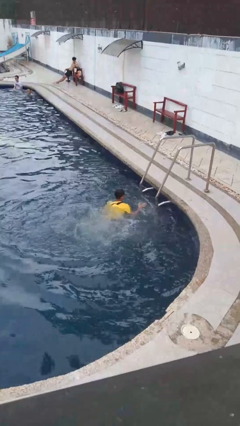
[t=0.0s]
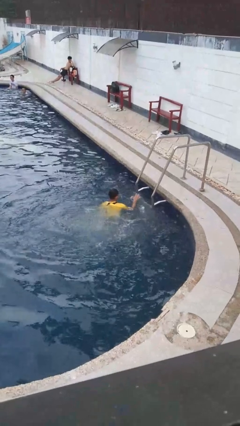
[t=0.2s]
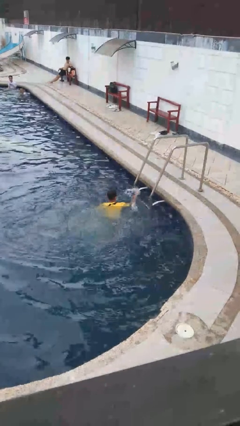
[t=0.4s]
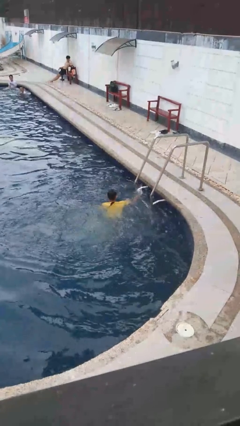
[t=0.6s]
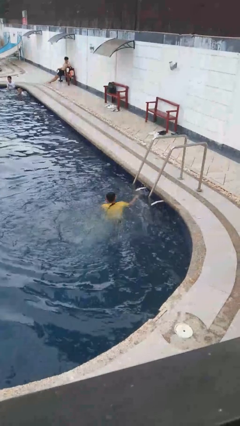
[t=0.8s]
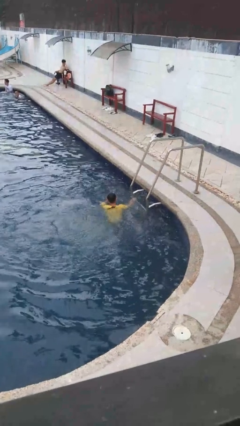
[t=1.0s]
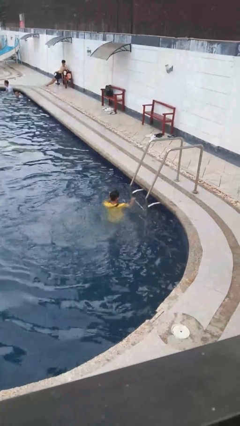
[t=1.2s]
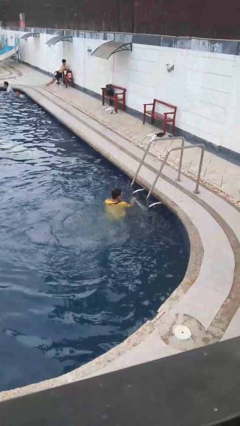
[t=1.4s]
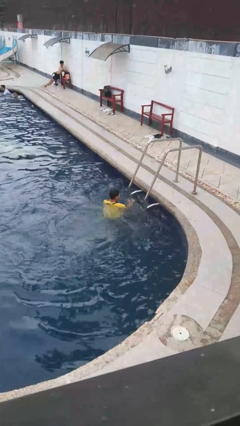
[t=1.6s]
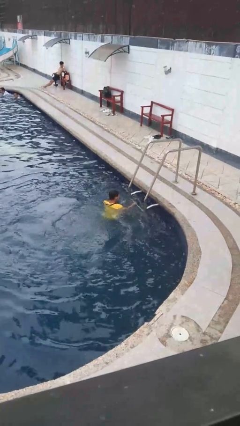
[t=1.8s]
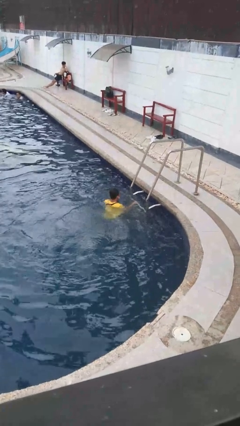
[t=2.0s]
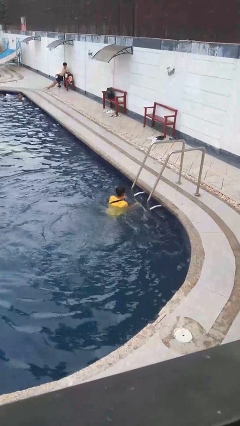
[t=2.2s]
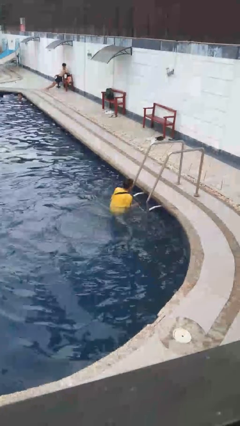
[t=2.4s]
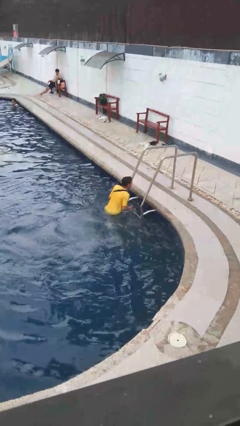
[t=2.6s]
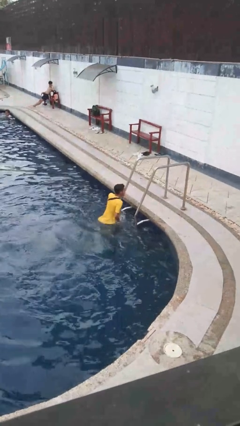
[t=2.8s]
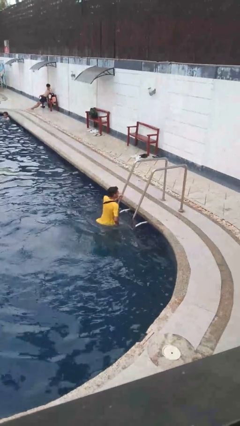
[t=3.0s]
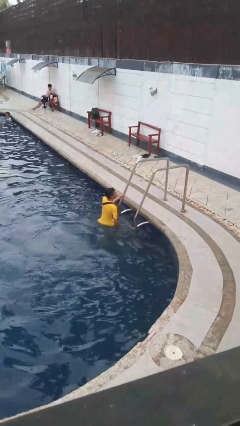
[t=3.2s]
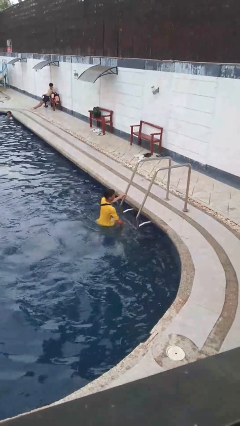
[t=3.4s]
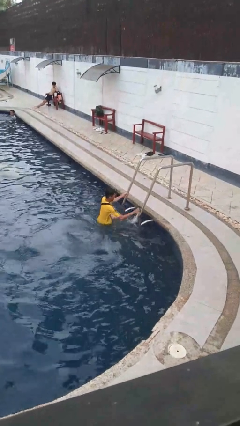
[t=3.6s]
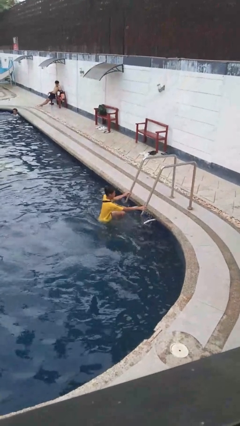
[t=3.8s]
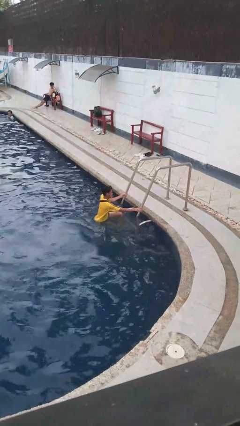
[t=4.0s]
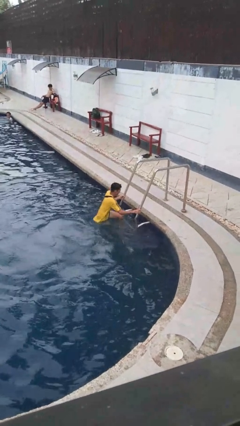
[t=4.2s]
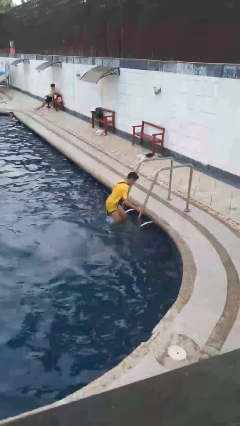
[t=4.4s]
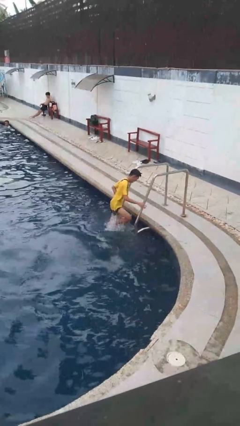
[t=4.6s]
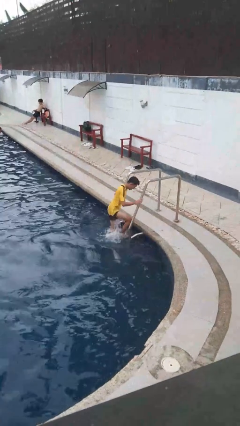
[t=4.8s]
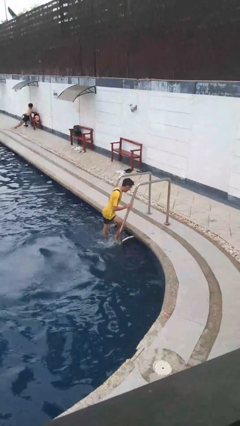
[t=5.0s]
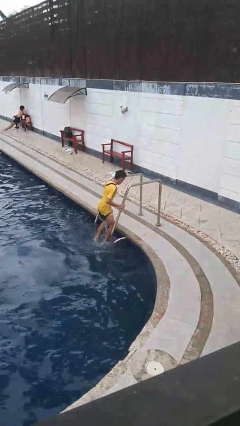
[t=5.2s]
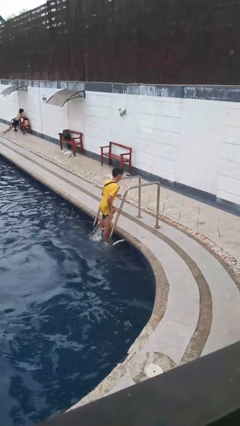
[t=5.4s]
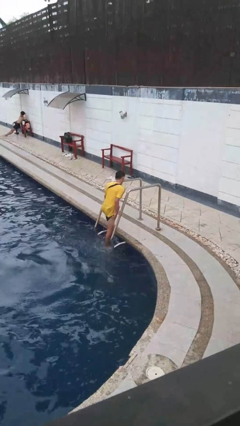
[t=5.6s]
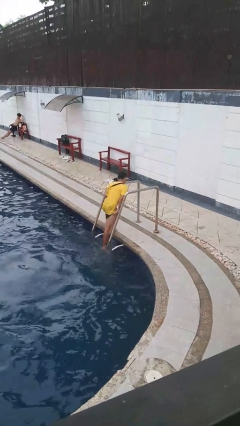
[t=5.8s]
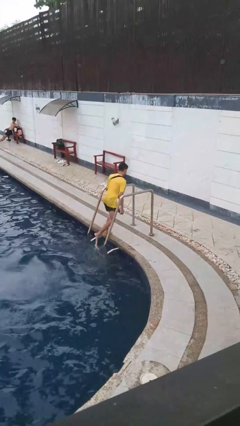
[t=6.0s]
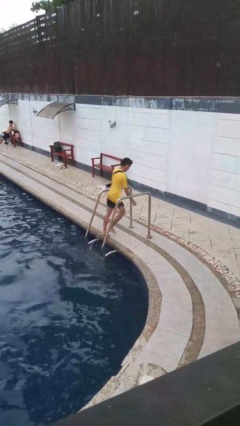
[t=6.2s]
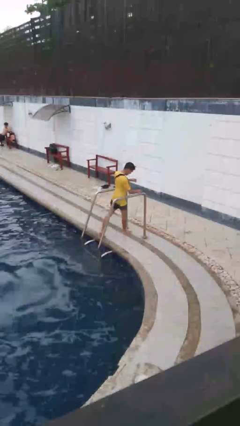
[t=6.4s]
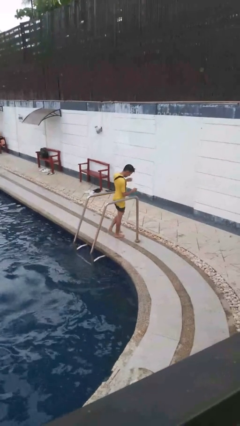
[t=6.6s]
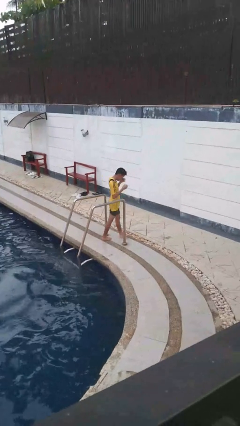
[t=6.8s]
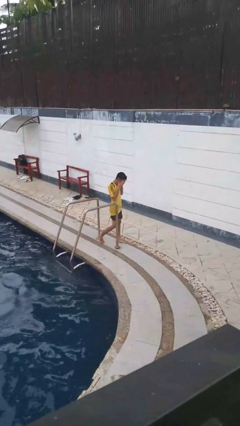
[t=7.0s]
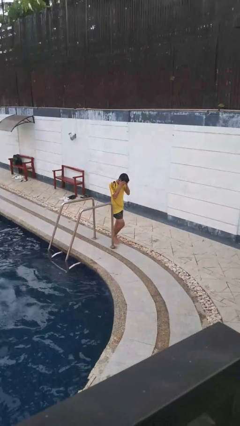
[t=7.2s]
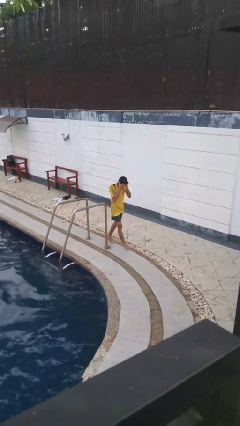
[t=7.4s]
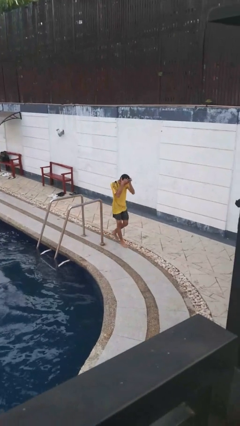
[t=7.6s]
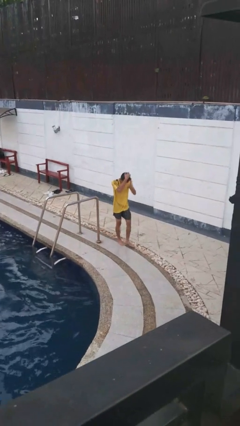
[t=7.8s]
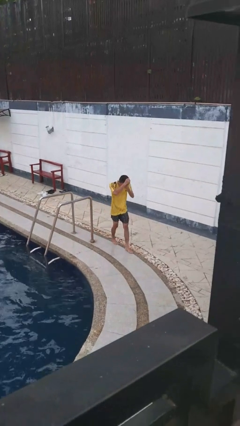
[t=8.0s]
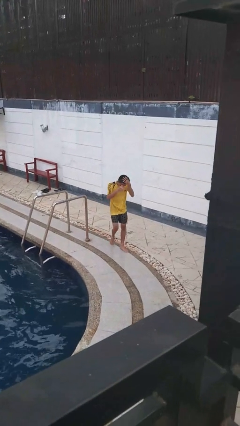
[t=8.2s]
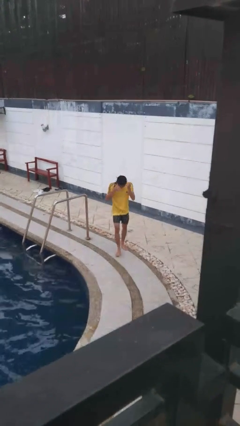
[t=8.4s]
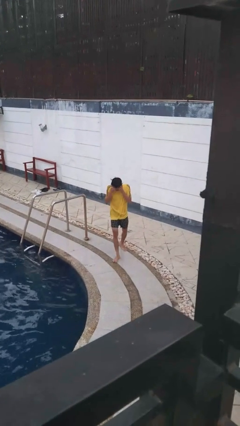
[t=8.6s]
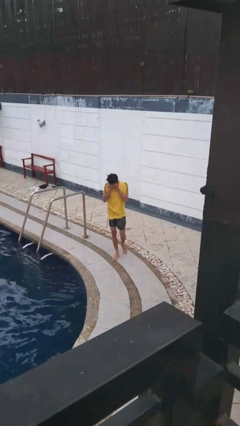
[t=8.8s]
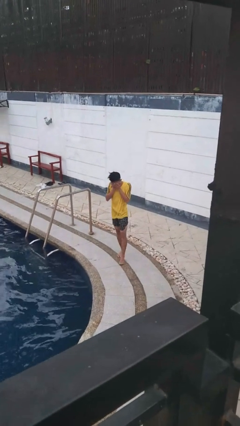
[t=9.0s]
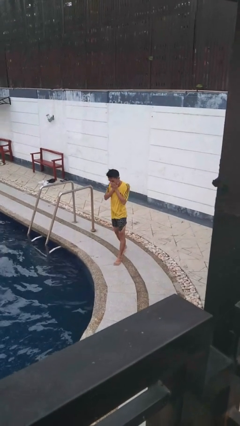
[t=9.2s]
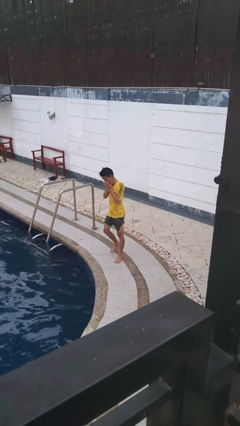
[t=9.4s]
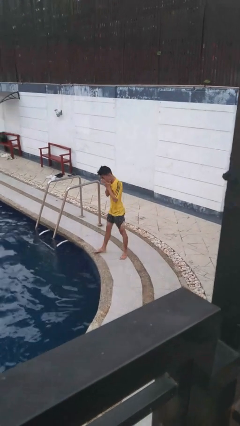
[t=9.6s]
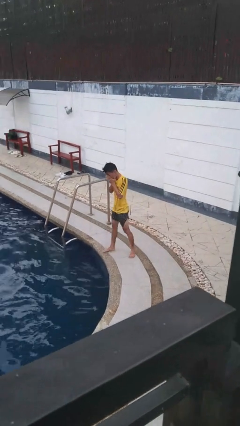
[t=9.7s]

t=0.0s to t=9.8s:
person exits pool

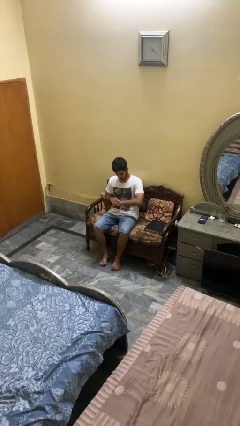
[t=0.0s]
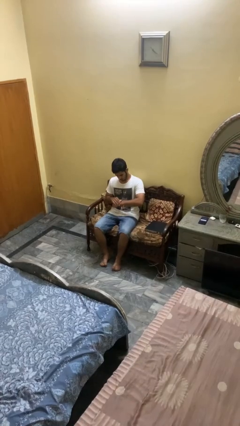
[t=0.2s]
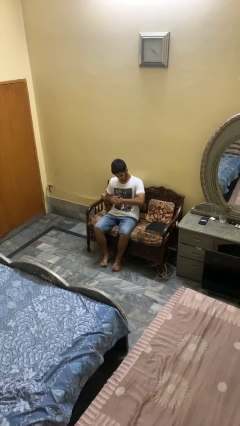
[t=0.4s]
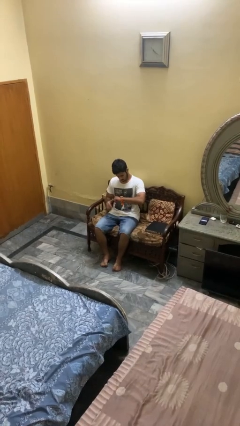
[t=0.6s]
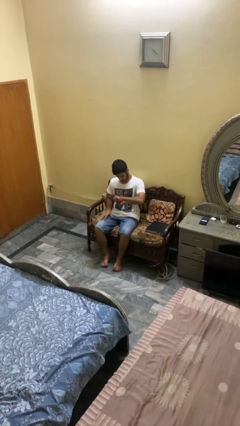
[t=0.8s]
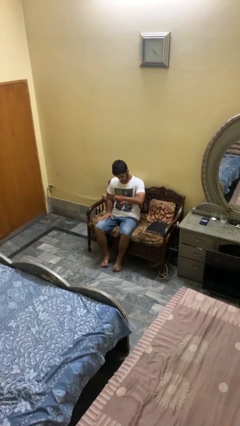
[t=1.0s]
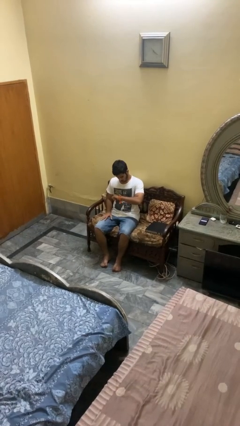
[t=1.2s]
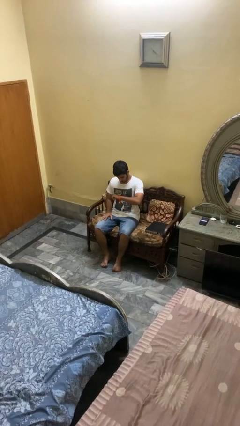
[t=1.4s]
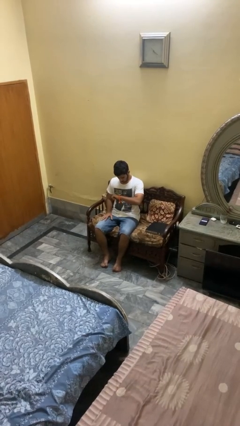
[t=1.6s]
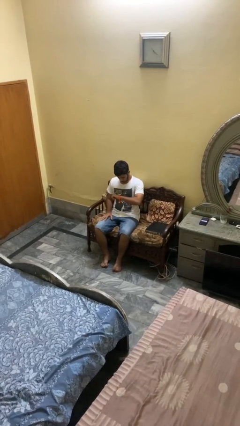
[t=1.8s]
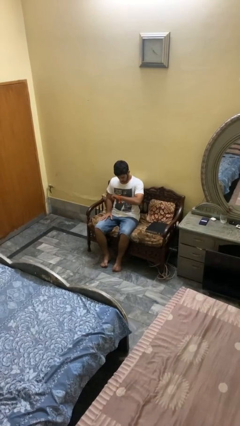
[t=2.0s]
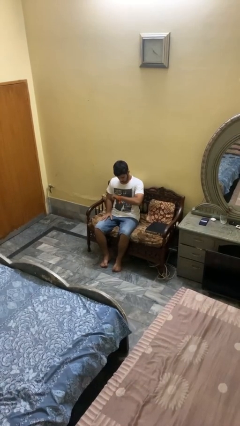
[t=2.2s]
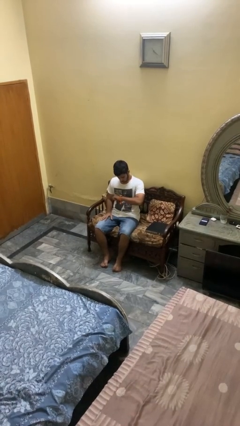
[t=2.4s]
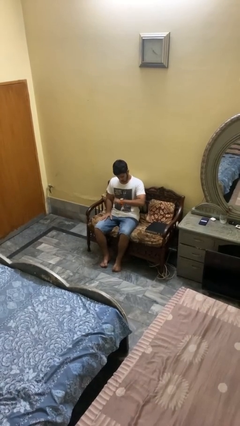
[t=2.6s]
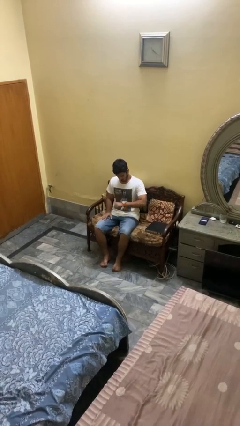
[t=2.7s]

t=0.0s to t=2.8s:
person looks at wristwatch

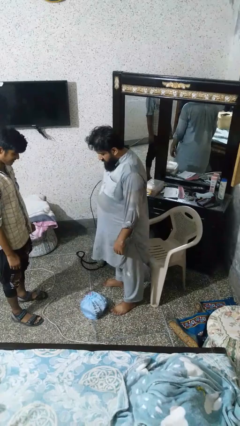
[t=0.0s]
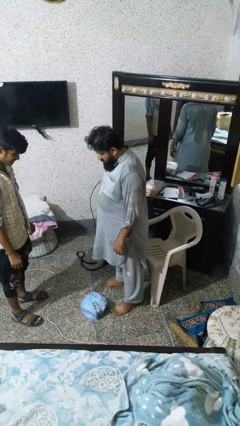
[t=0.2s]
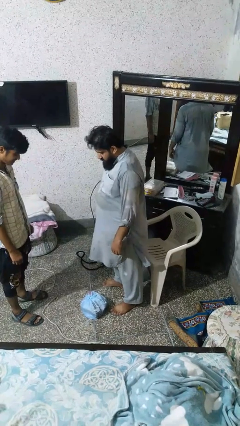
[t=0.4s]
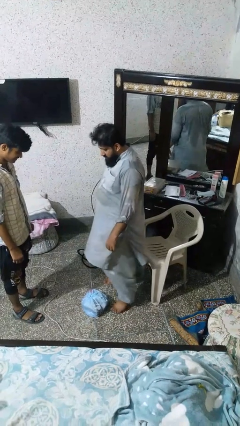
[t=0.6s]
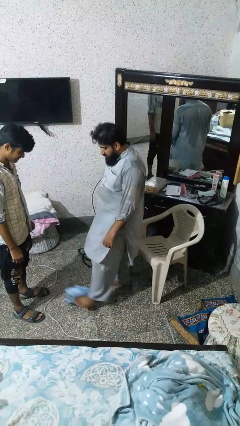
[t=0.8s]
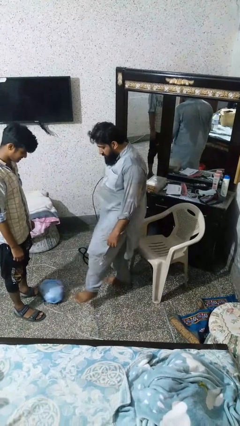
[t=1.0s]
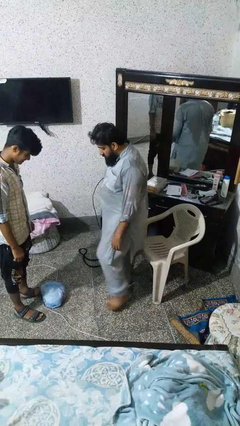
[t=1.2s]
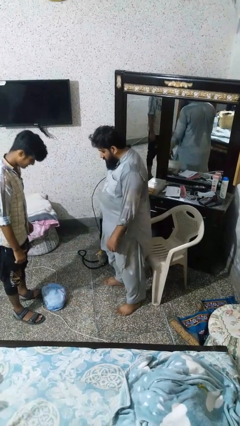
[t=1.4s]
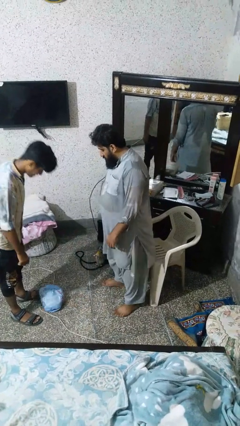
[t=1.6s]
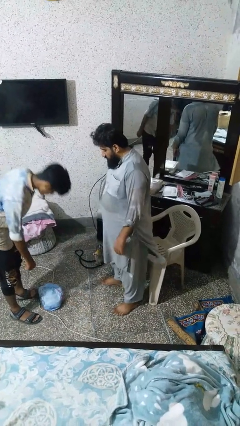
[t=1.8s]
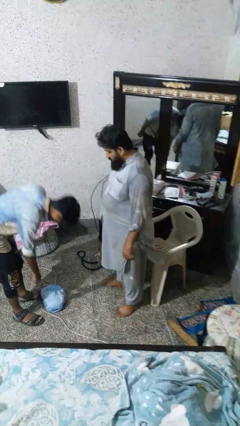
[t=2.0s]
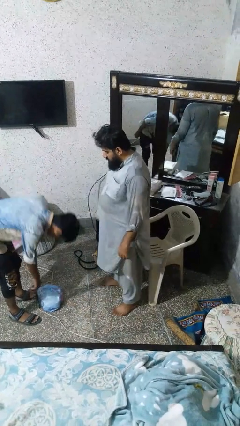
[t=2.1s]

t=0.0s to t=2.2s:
person kicks object to person

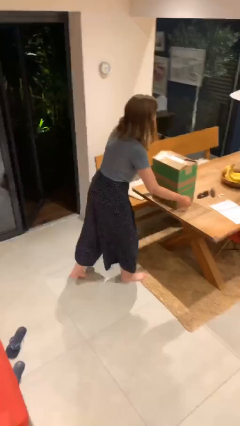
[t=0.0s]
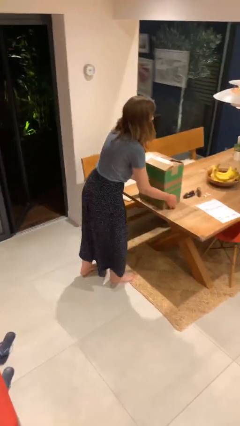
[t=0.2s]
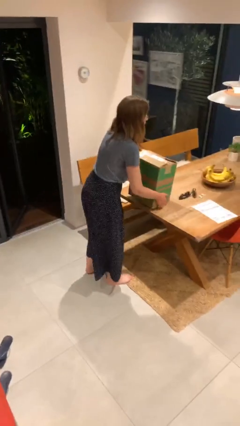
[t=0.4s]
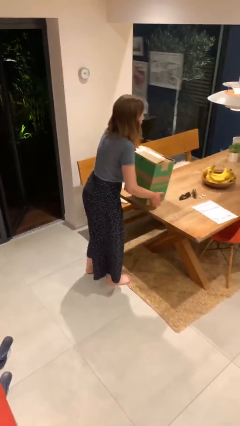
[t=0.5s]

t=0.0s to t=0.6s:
person picks up object from table

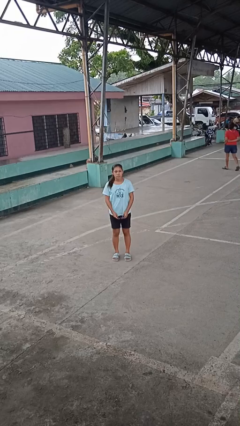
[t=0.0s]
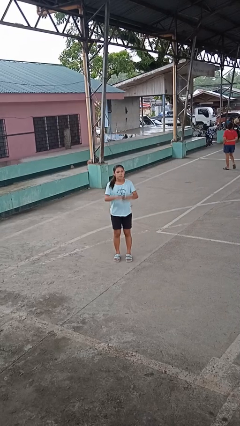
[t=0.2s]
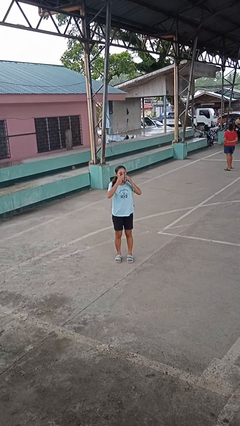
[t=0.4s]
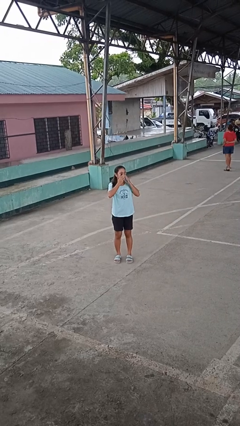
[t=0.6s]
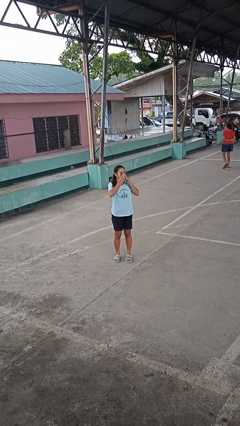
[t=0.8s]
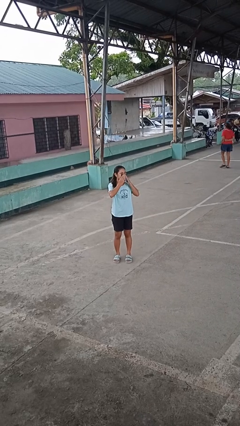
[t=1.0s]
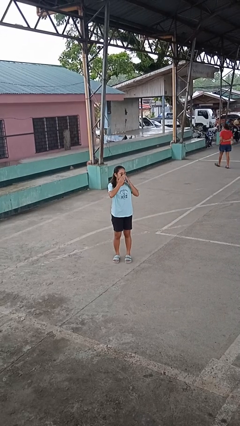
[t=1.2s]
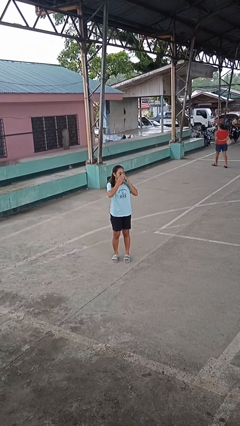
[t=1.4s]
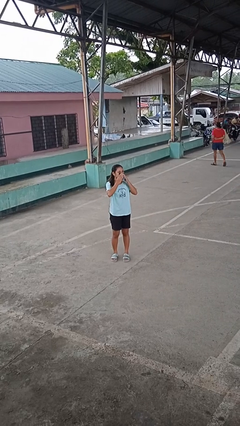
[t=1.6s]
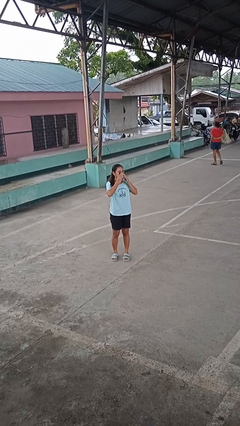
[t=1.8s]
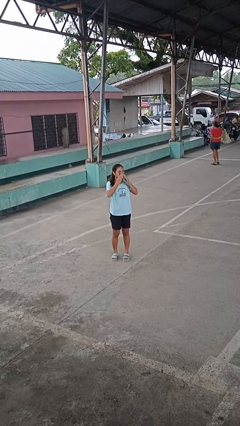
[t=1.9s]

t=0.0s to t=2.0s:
person blows nose
